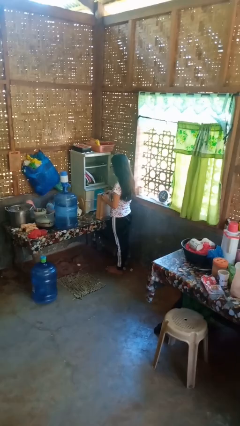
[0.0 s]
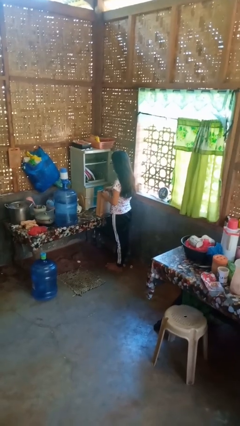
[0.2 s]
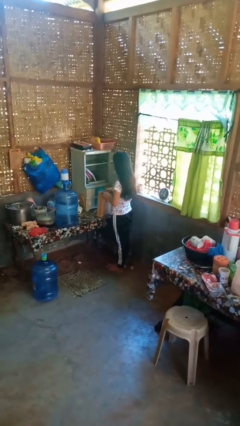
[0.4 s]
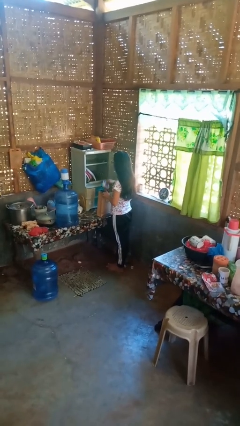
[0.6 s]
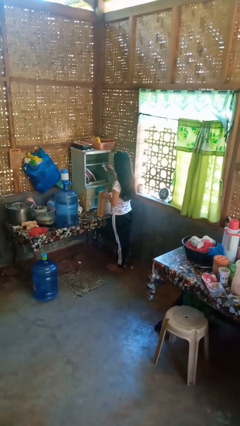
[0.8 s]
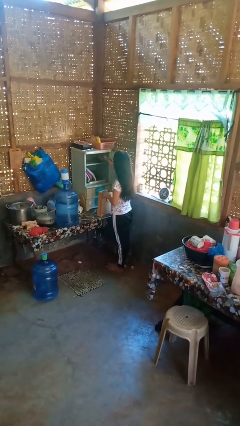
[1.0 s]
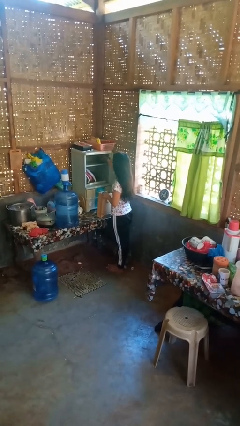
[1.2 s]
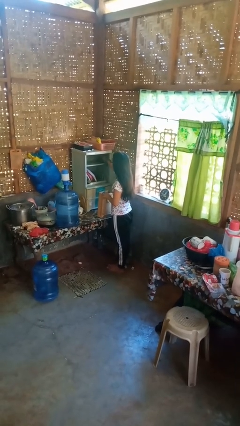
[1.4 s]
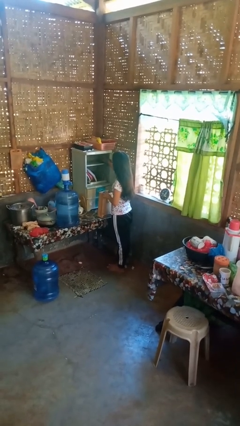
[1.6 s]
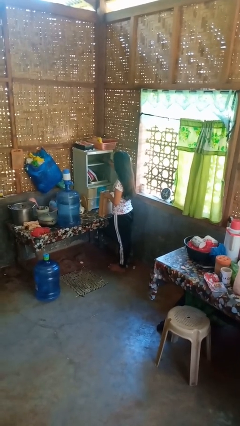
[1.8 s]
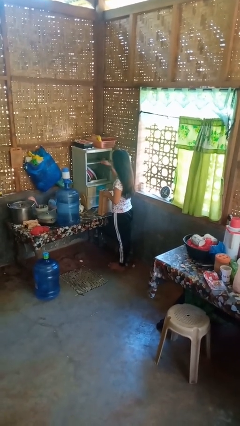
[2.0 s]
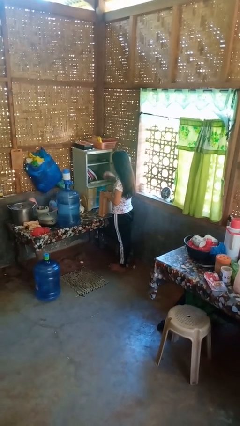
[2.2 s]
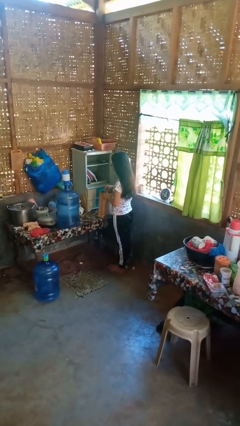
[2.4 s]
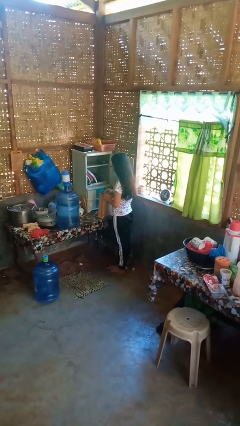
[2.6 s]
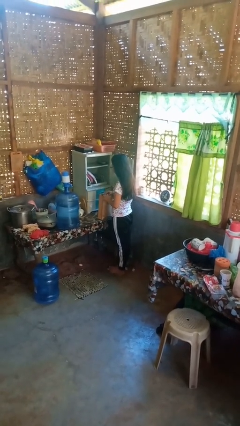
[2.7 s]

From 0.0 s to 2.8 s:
person loads groceries into cabinet

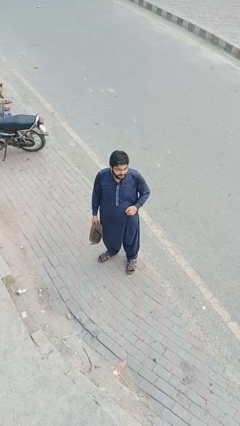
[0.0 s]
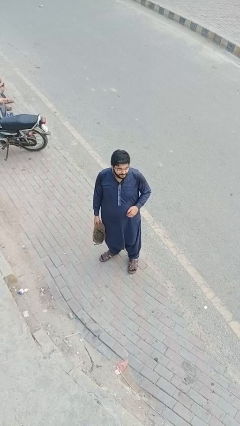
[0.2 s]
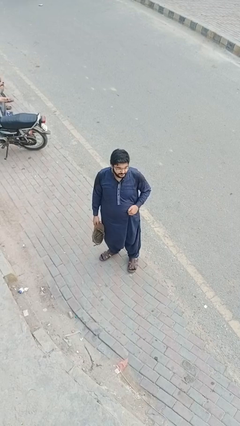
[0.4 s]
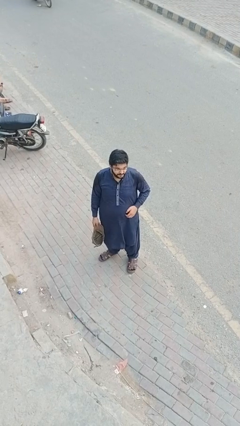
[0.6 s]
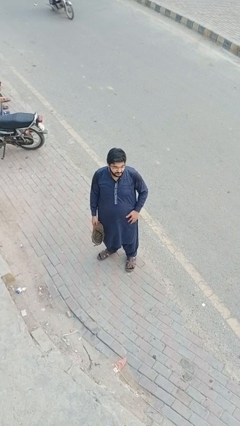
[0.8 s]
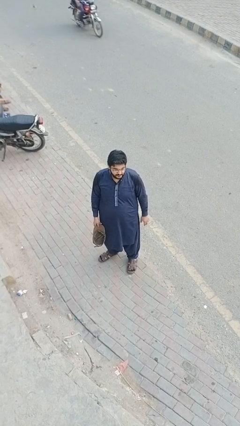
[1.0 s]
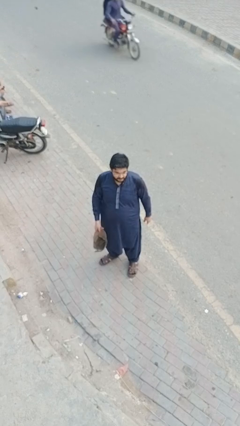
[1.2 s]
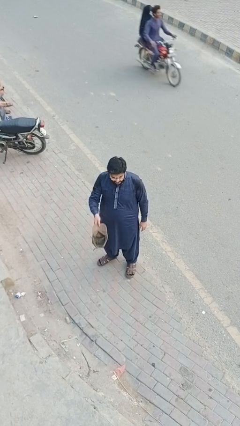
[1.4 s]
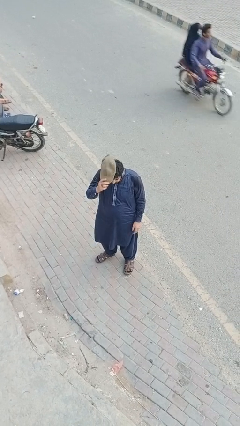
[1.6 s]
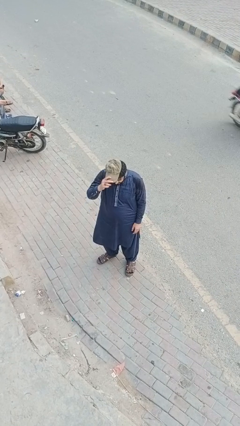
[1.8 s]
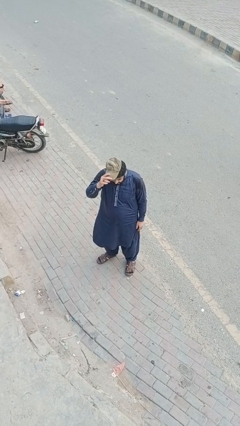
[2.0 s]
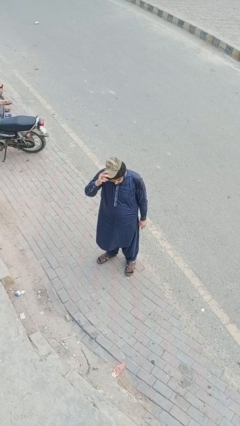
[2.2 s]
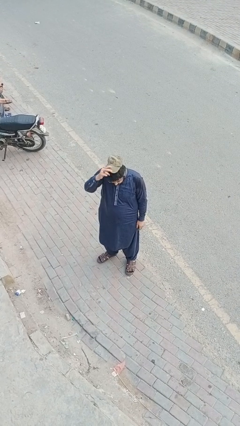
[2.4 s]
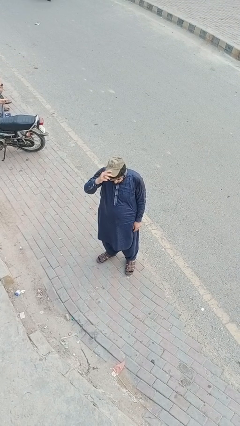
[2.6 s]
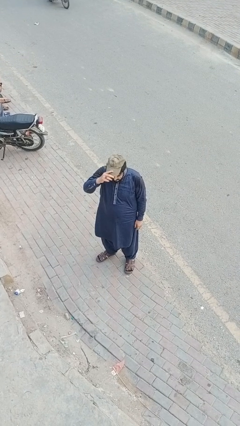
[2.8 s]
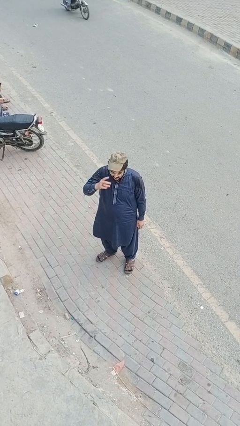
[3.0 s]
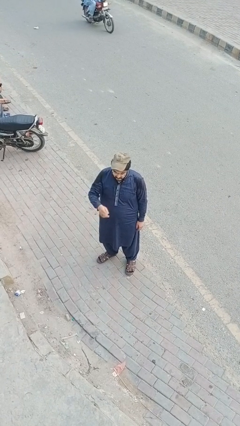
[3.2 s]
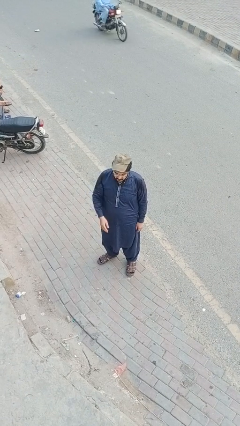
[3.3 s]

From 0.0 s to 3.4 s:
person puts on hat

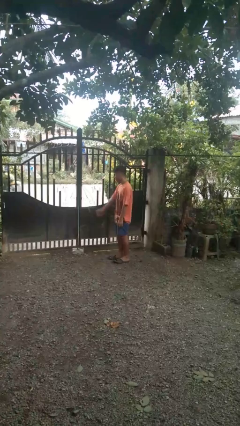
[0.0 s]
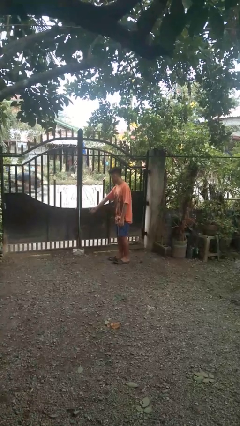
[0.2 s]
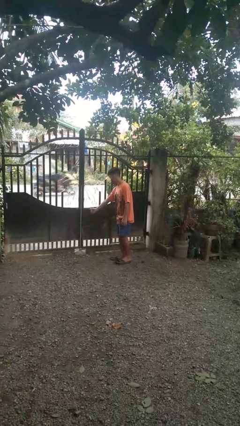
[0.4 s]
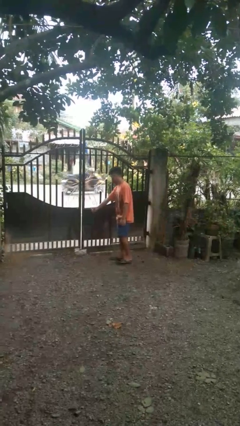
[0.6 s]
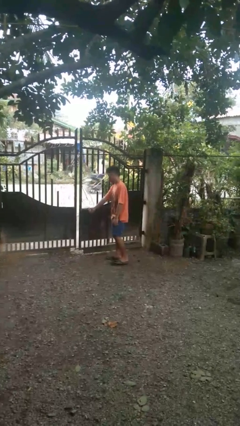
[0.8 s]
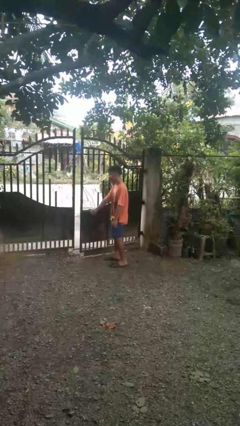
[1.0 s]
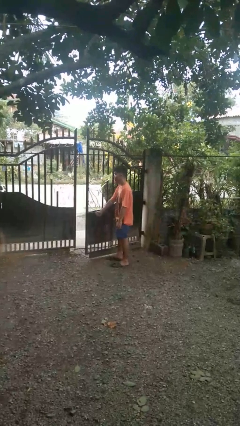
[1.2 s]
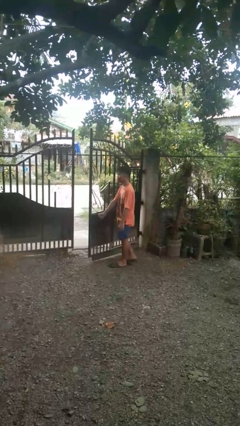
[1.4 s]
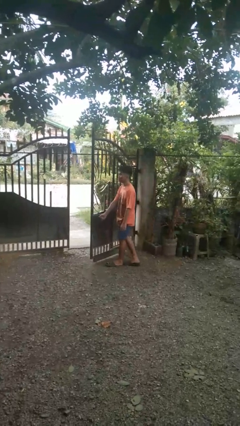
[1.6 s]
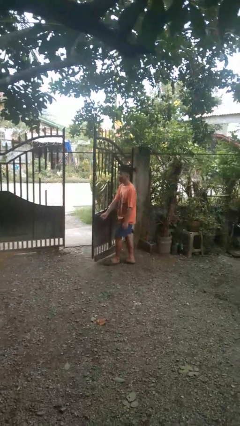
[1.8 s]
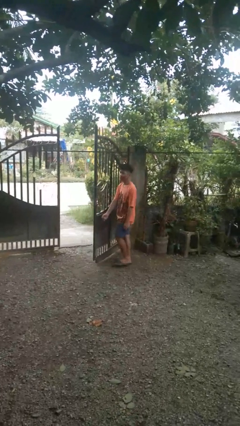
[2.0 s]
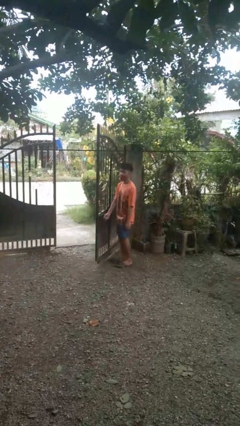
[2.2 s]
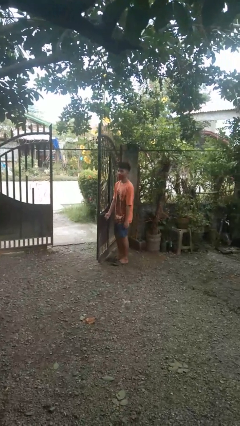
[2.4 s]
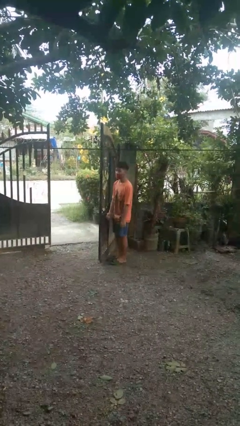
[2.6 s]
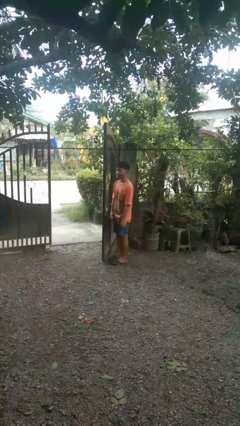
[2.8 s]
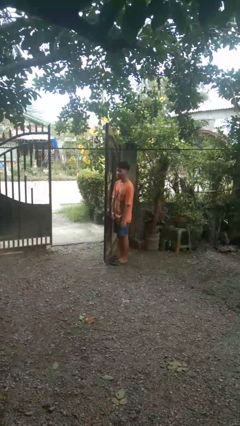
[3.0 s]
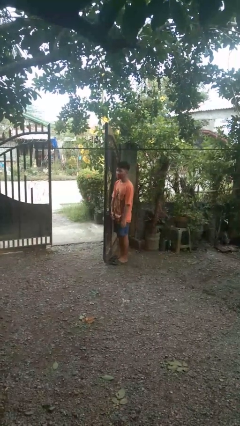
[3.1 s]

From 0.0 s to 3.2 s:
person opens gate

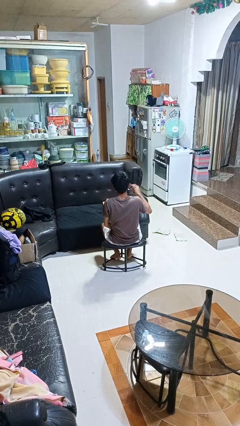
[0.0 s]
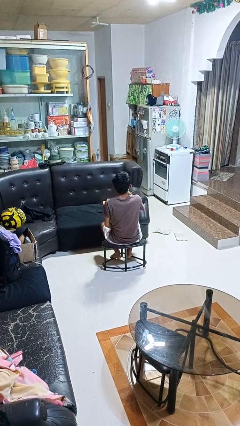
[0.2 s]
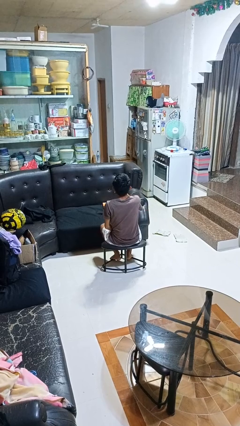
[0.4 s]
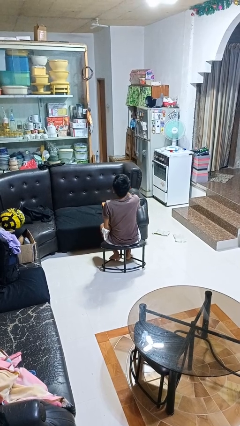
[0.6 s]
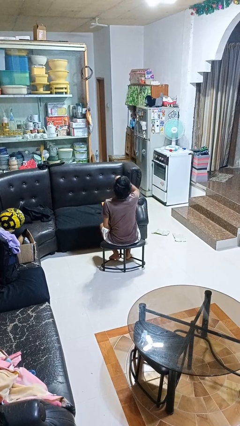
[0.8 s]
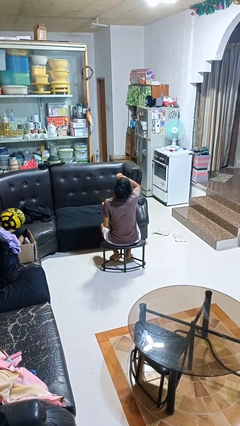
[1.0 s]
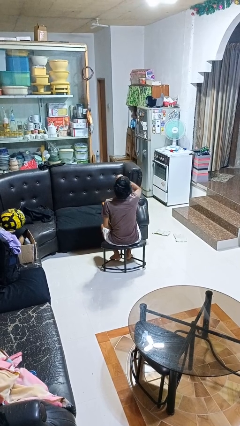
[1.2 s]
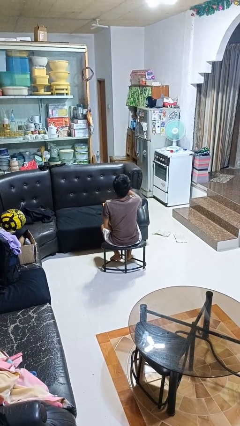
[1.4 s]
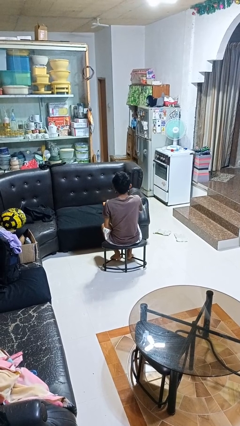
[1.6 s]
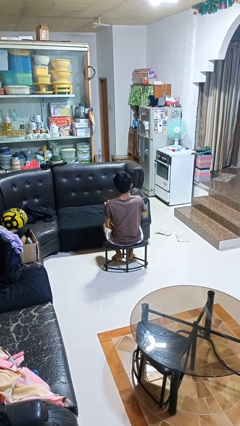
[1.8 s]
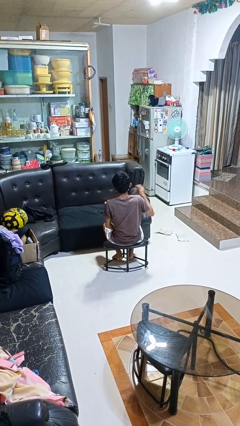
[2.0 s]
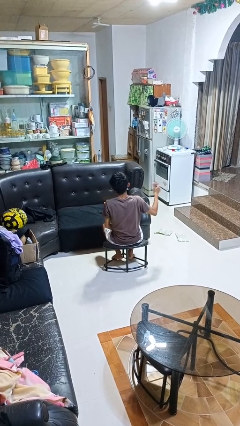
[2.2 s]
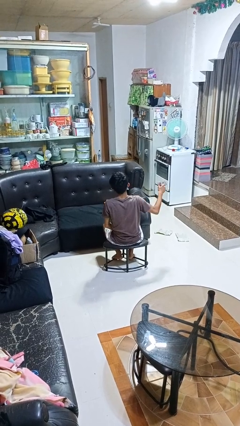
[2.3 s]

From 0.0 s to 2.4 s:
person drinks from beverage can

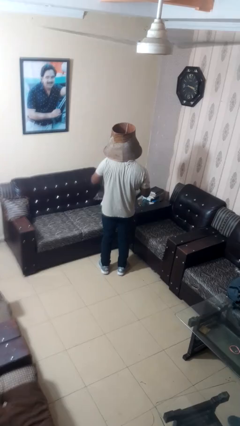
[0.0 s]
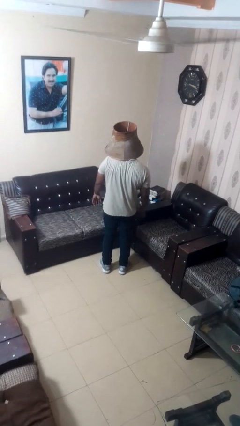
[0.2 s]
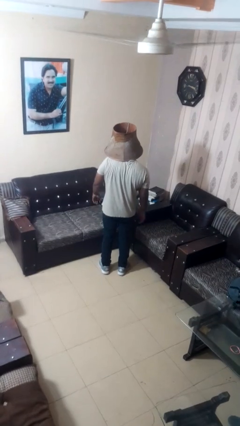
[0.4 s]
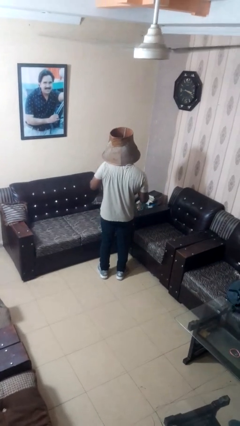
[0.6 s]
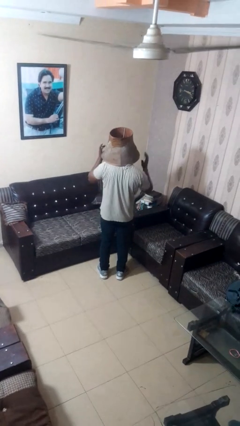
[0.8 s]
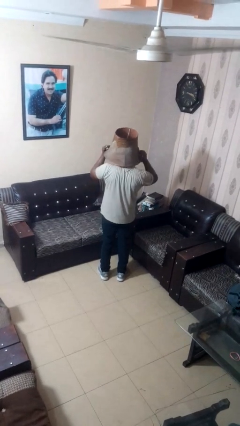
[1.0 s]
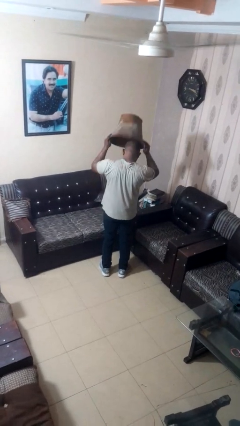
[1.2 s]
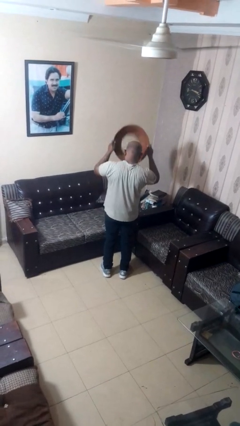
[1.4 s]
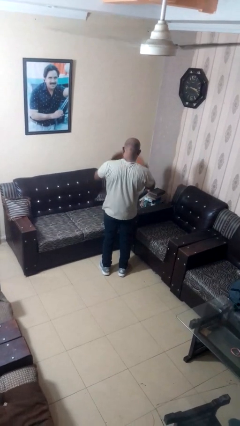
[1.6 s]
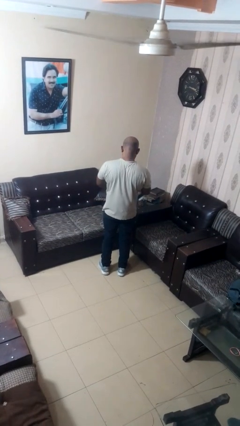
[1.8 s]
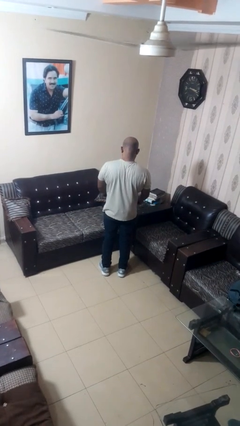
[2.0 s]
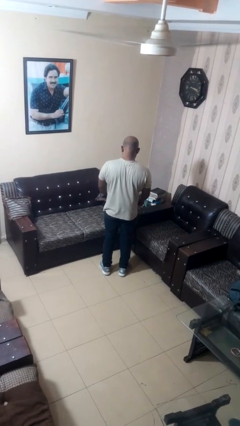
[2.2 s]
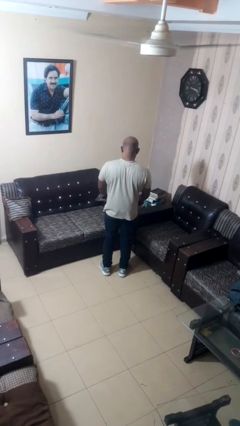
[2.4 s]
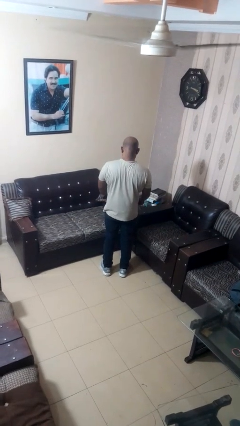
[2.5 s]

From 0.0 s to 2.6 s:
person takes off hat

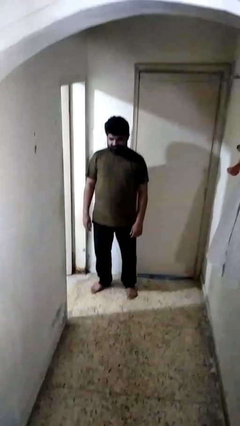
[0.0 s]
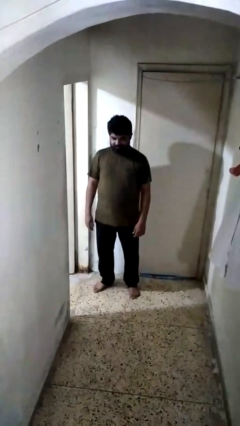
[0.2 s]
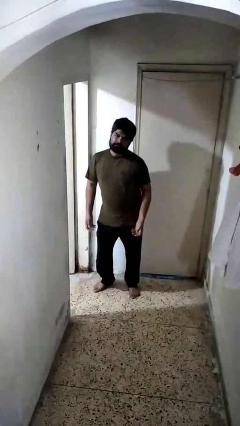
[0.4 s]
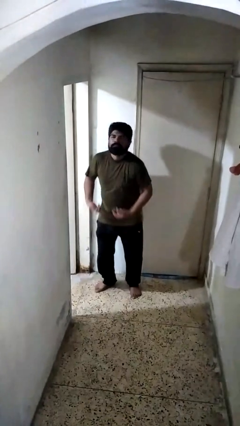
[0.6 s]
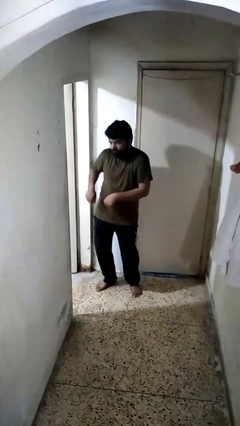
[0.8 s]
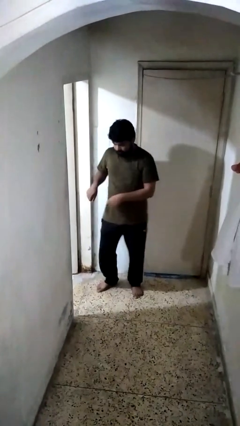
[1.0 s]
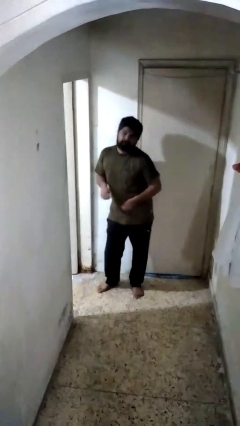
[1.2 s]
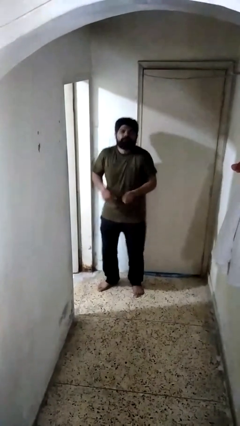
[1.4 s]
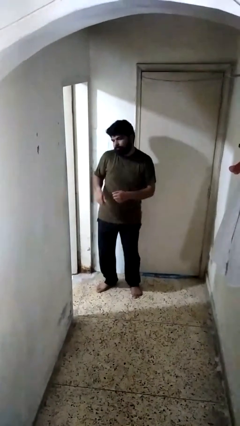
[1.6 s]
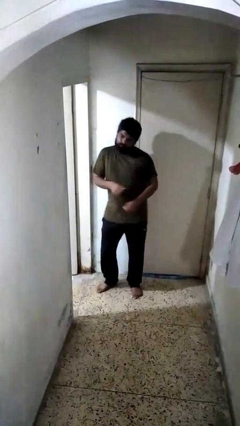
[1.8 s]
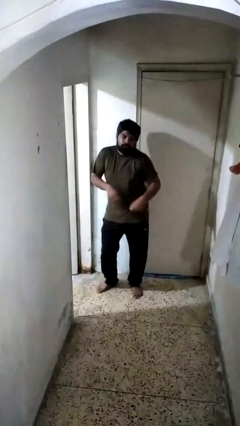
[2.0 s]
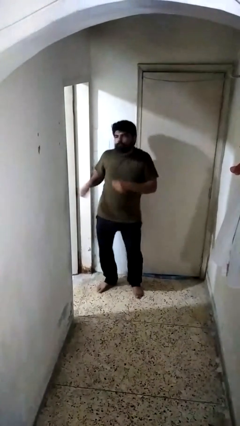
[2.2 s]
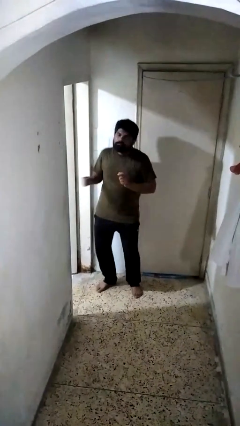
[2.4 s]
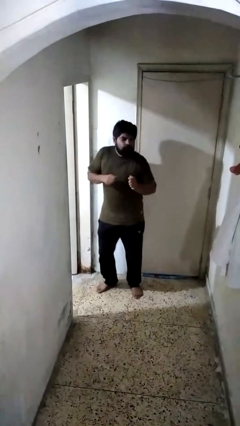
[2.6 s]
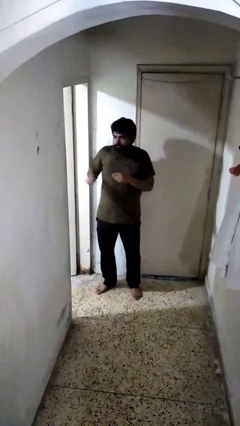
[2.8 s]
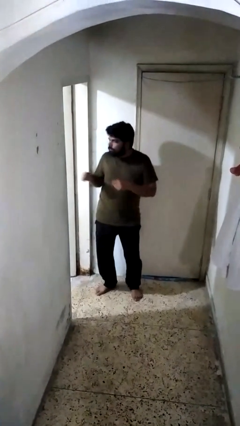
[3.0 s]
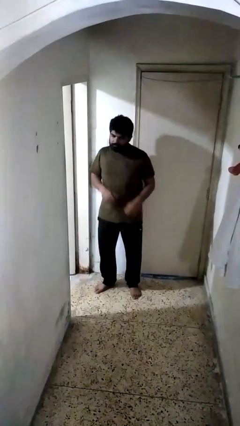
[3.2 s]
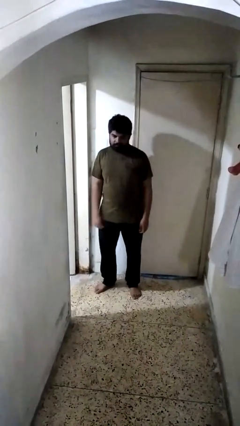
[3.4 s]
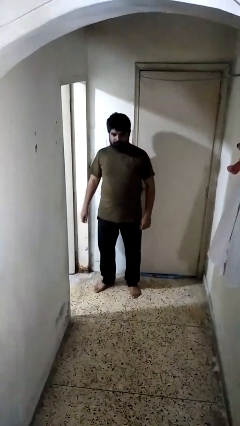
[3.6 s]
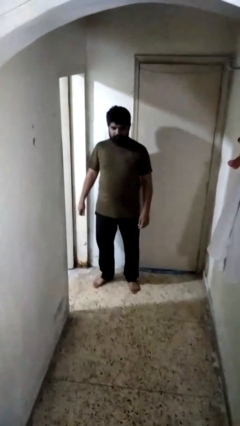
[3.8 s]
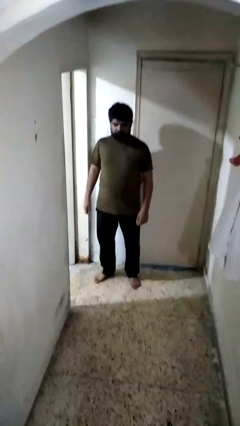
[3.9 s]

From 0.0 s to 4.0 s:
person dances in place
